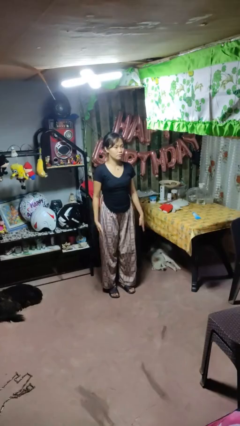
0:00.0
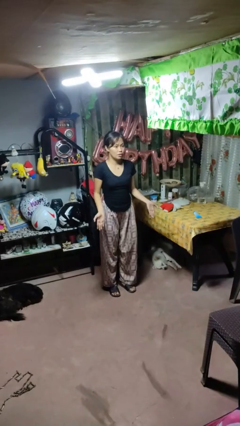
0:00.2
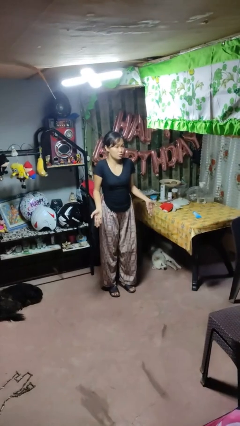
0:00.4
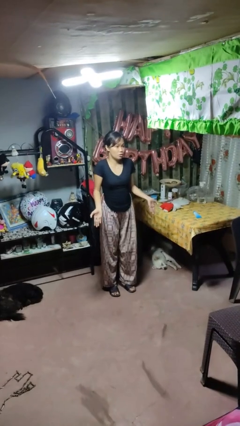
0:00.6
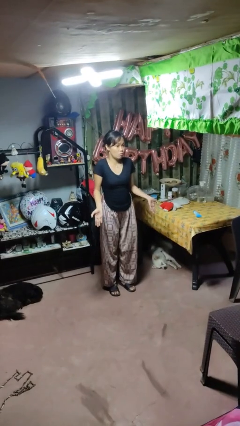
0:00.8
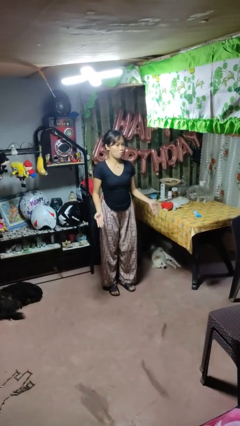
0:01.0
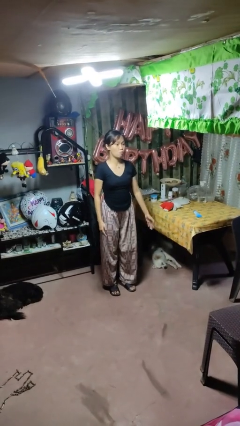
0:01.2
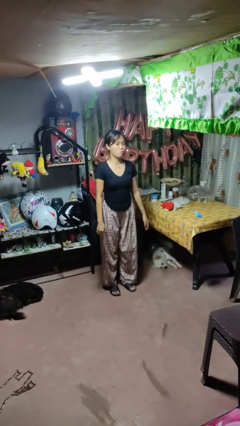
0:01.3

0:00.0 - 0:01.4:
person shrugs

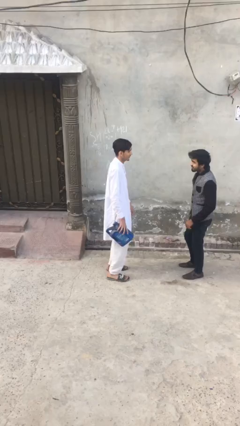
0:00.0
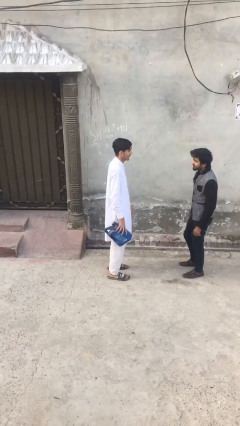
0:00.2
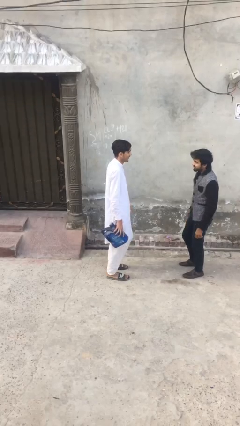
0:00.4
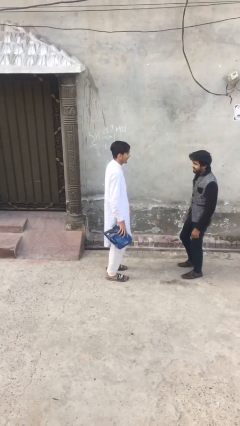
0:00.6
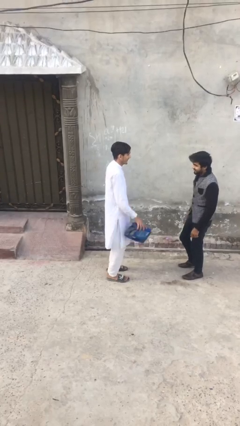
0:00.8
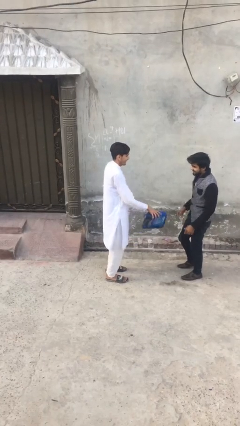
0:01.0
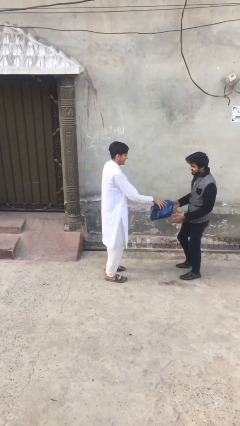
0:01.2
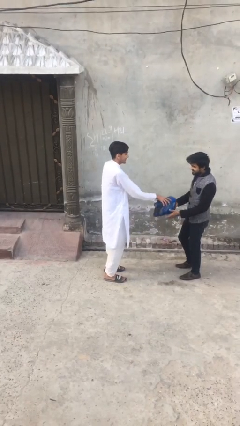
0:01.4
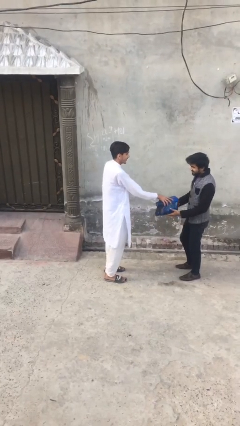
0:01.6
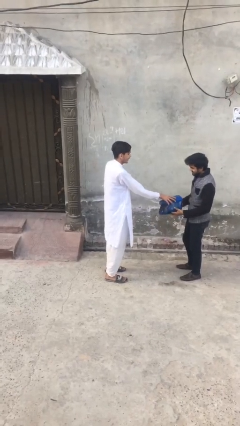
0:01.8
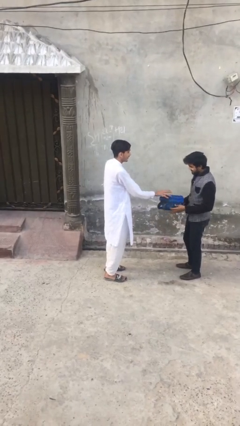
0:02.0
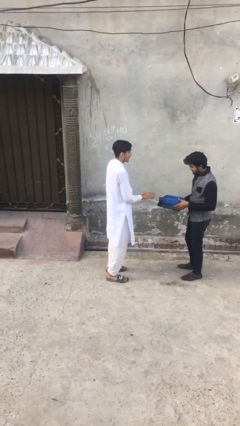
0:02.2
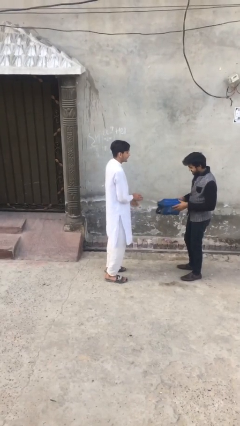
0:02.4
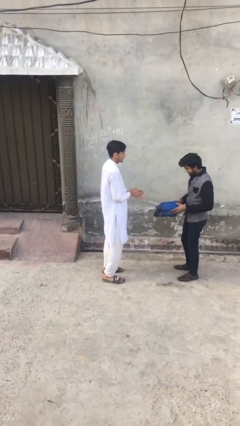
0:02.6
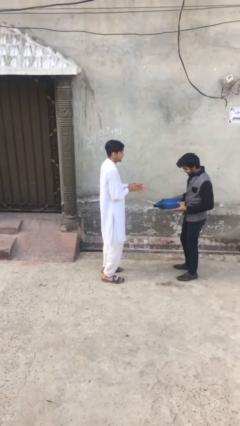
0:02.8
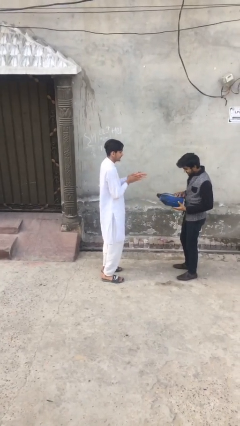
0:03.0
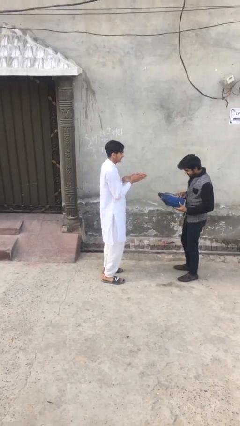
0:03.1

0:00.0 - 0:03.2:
person transfers object to person

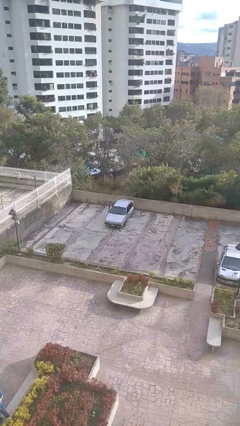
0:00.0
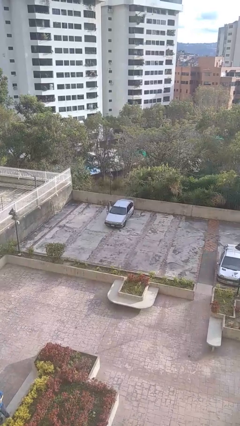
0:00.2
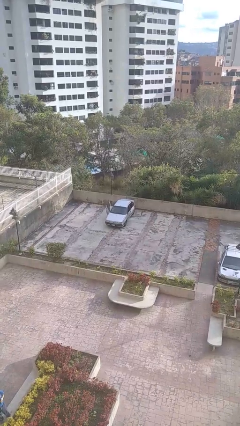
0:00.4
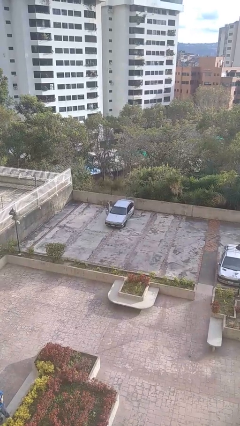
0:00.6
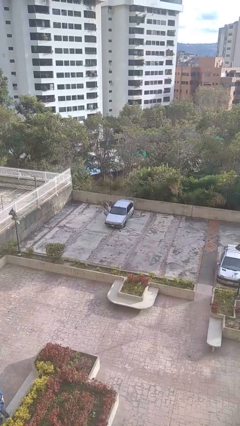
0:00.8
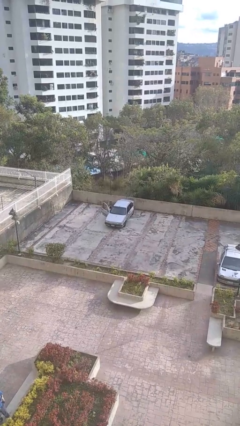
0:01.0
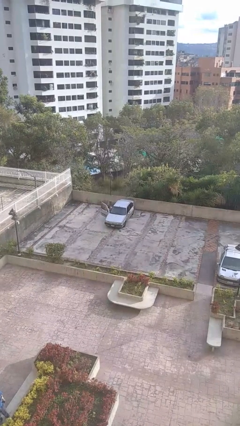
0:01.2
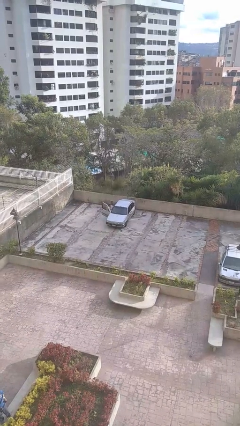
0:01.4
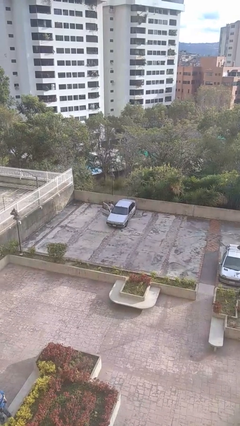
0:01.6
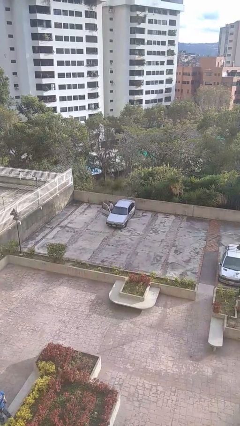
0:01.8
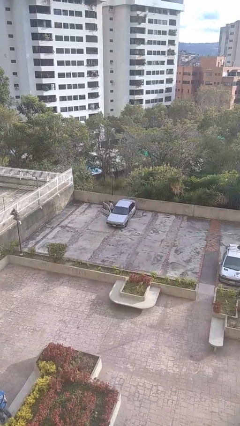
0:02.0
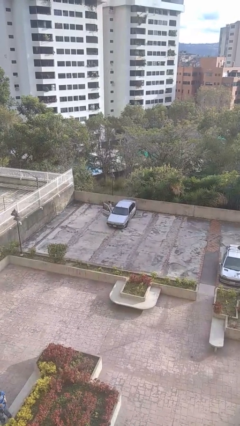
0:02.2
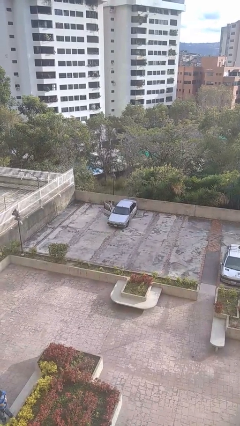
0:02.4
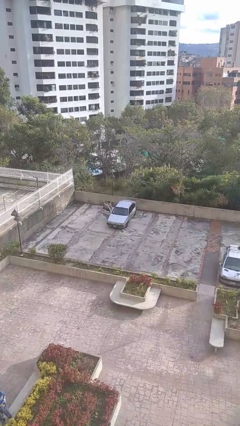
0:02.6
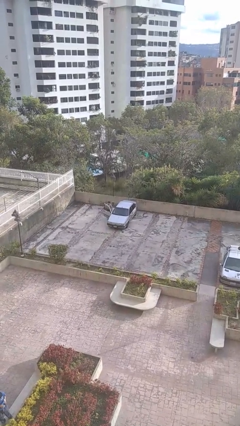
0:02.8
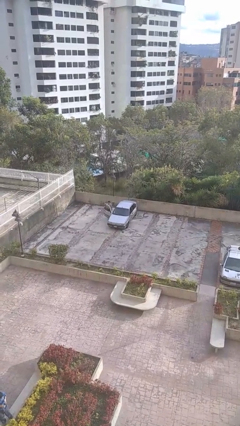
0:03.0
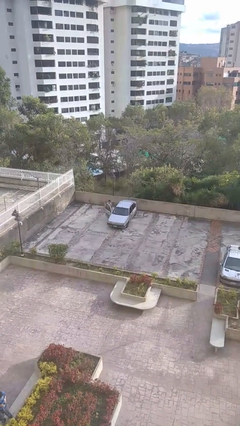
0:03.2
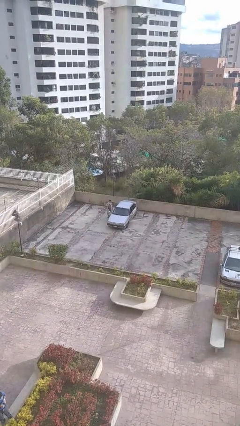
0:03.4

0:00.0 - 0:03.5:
car drops off person

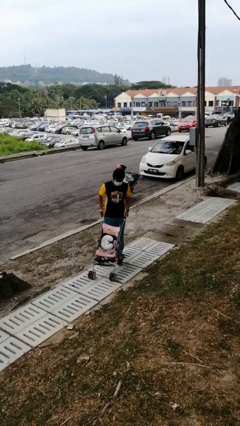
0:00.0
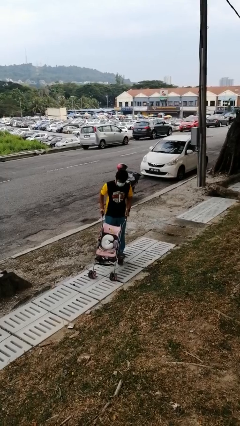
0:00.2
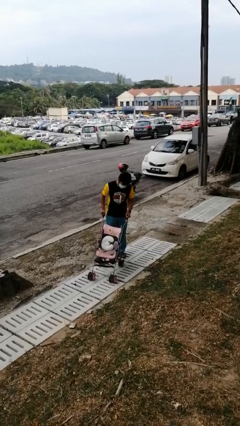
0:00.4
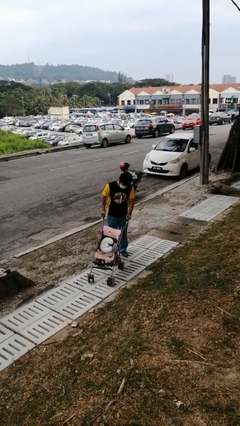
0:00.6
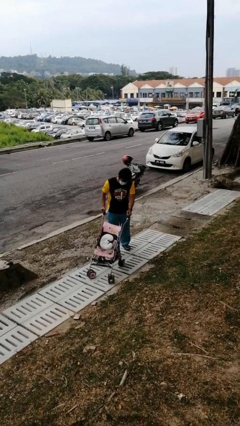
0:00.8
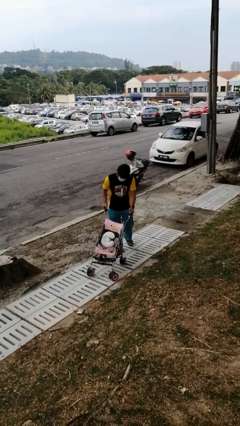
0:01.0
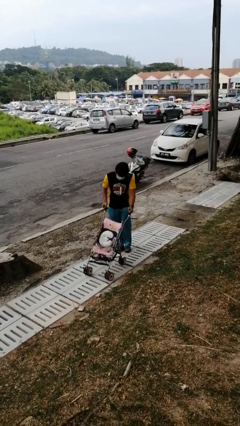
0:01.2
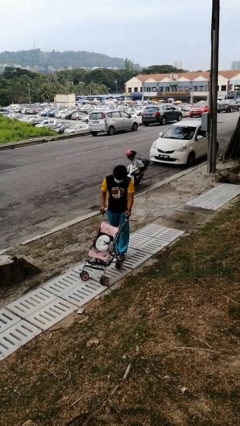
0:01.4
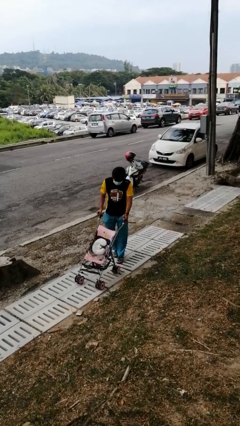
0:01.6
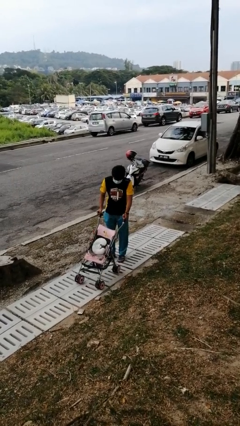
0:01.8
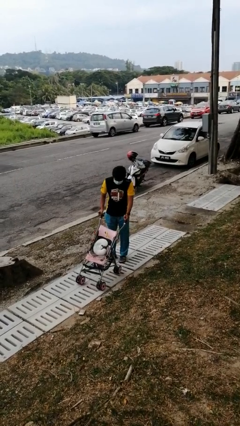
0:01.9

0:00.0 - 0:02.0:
person pushes wheeled cart

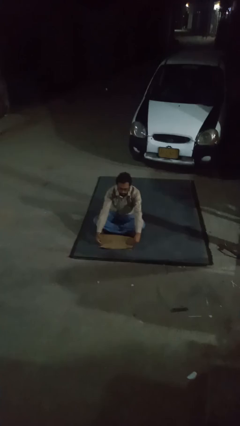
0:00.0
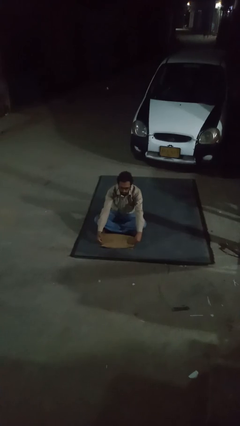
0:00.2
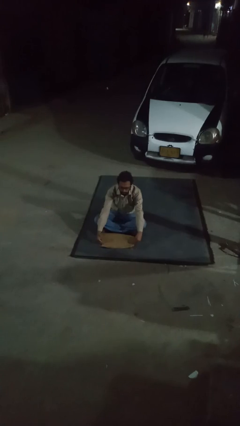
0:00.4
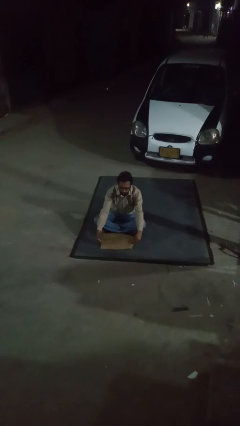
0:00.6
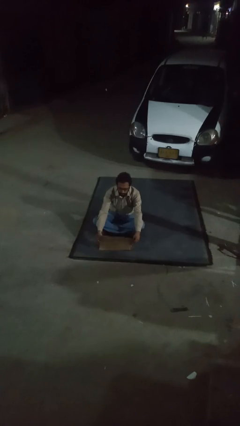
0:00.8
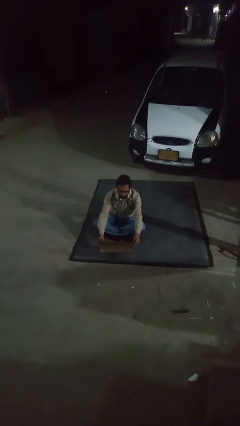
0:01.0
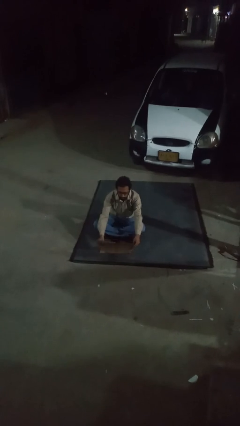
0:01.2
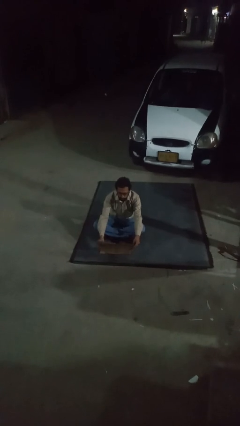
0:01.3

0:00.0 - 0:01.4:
person opens laptop

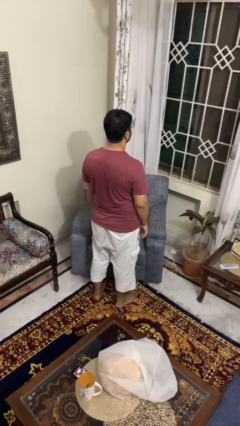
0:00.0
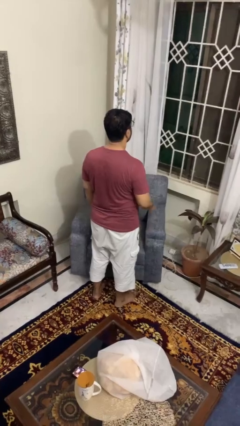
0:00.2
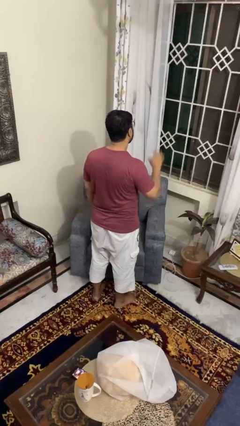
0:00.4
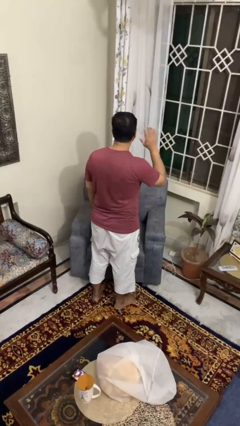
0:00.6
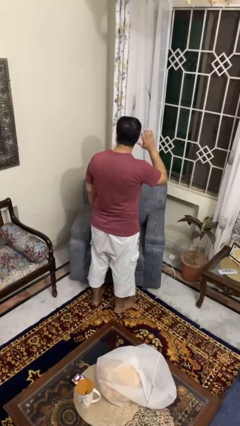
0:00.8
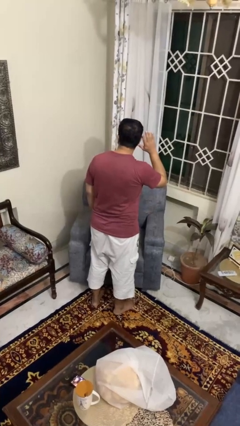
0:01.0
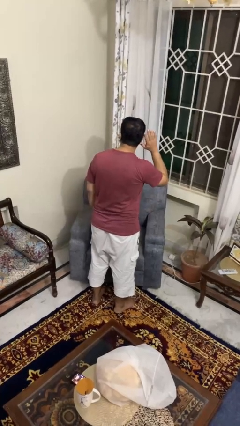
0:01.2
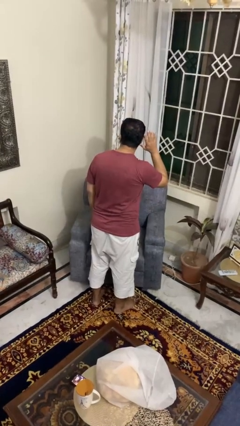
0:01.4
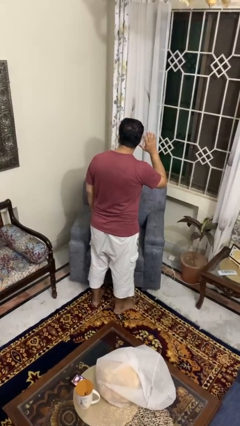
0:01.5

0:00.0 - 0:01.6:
person gestures listen closely

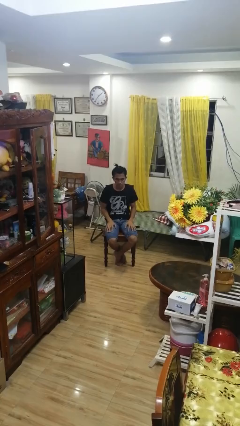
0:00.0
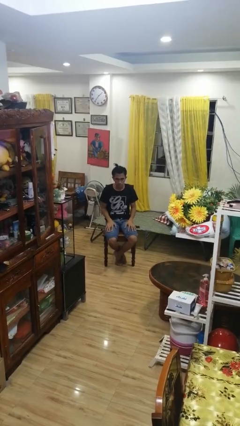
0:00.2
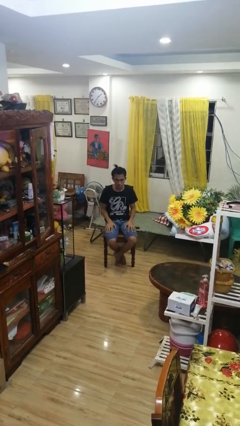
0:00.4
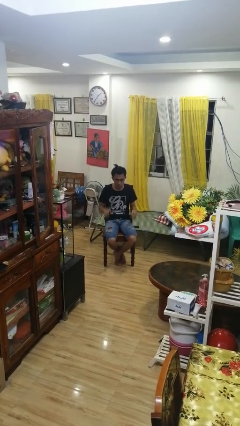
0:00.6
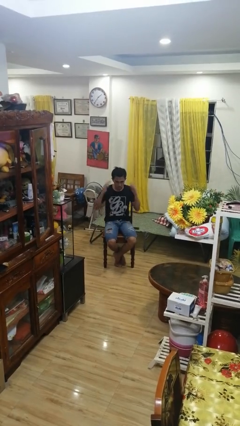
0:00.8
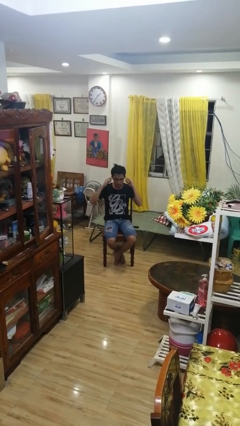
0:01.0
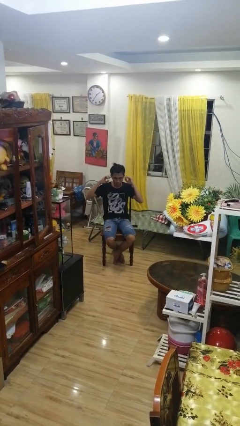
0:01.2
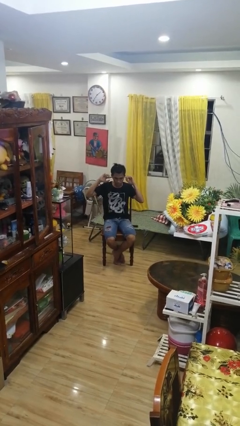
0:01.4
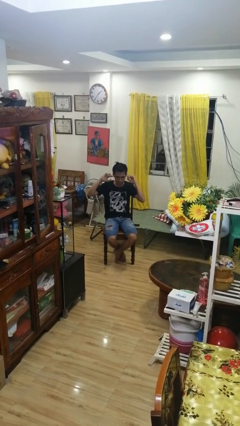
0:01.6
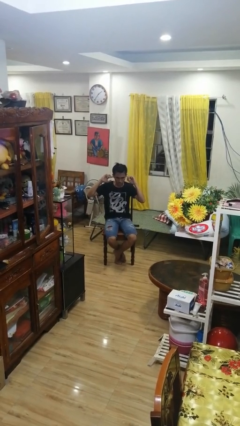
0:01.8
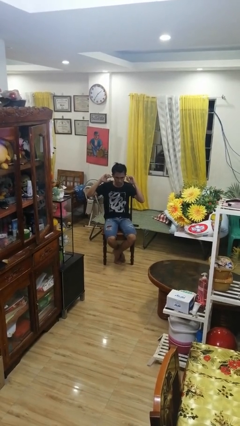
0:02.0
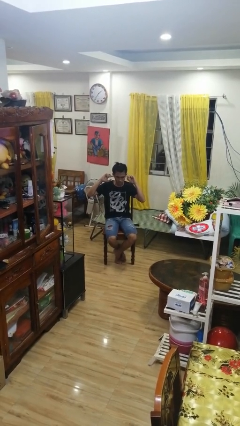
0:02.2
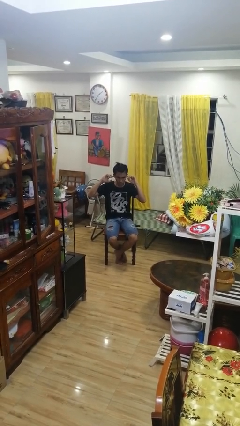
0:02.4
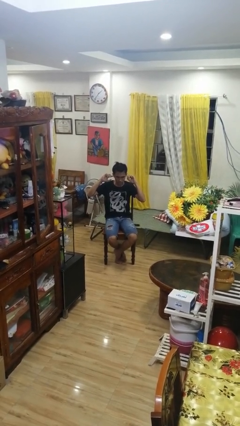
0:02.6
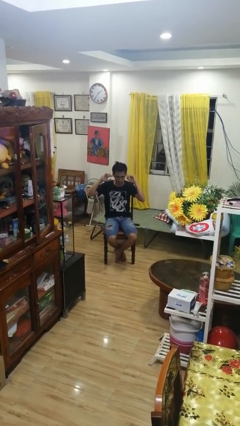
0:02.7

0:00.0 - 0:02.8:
person puts fingers in ear

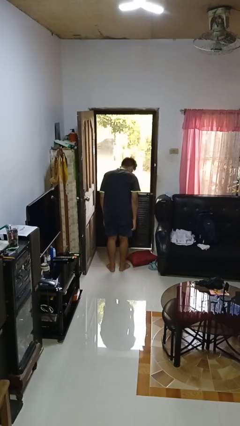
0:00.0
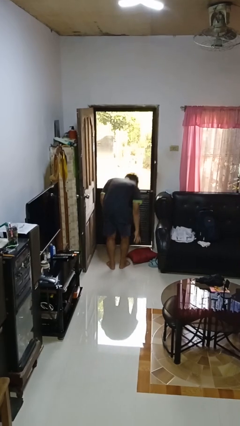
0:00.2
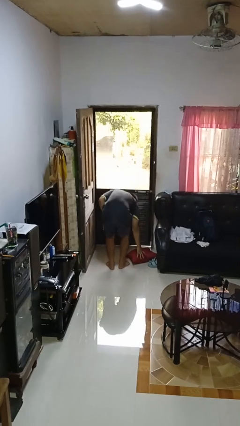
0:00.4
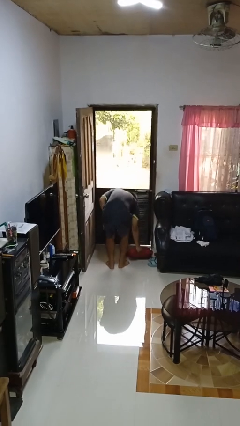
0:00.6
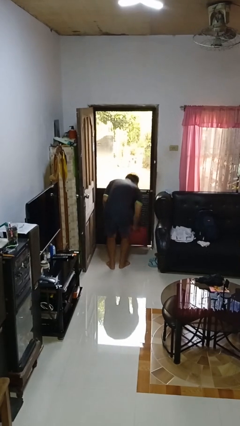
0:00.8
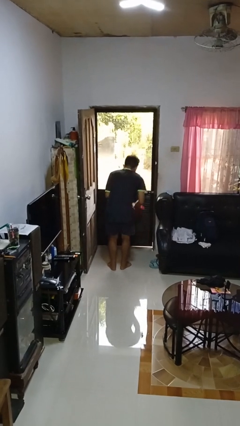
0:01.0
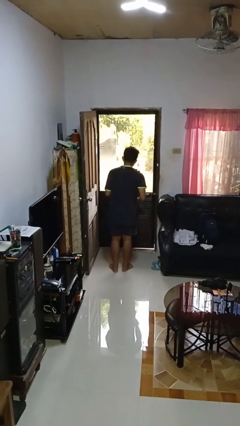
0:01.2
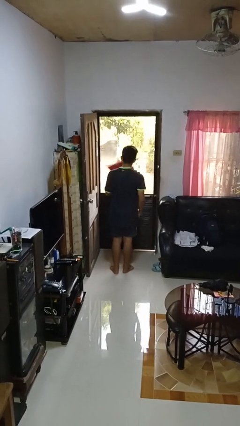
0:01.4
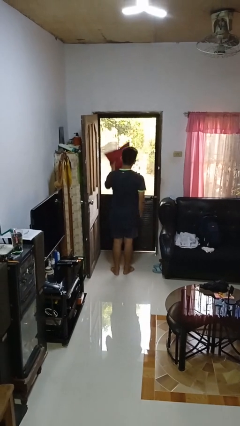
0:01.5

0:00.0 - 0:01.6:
person picks up object from floor
